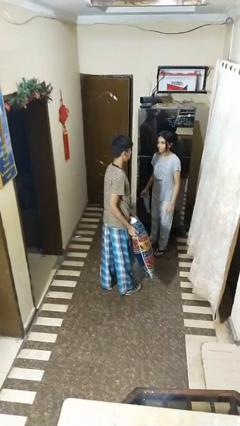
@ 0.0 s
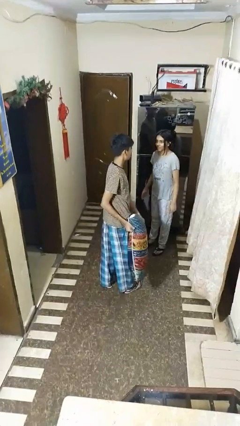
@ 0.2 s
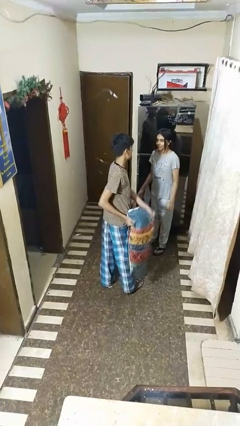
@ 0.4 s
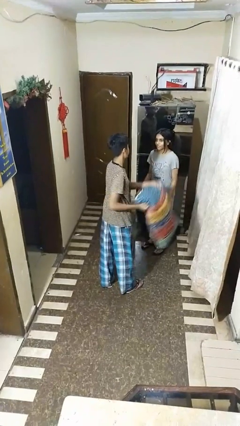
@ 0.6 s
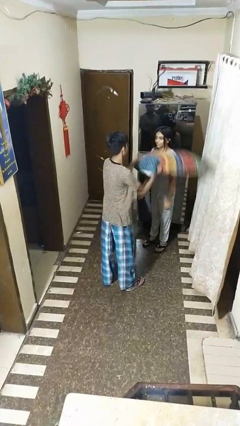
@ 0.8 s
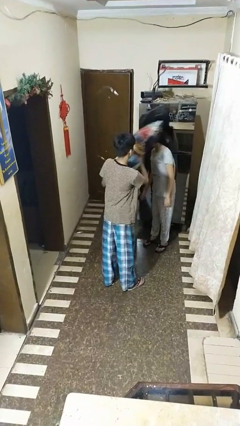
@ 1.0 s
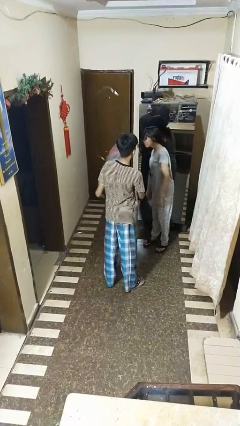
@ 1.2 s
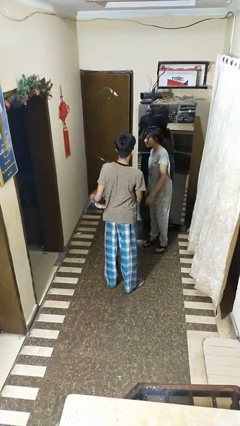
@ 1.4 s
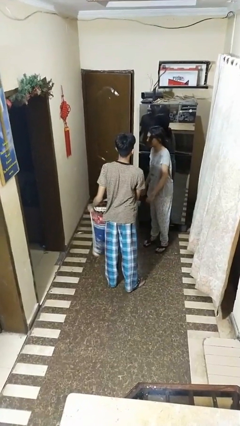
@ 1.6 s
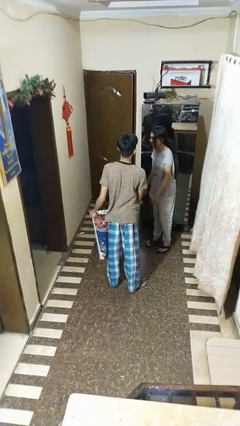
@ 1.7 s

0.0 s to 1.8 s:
person hits person with pillow

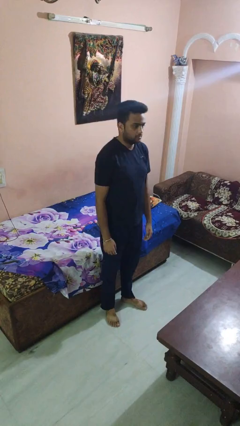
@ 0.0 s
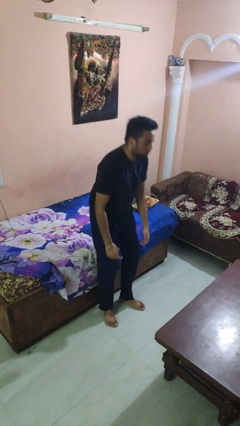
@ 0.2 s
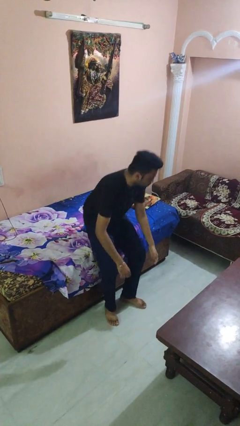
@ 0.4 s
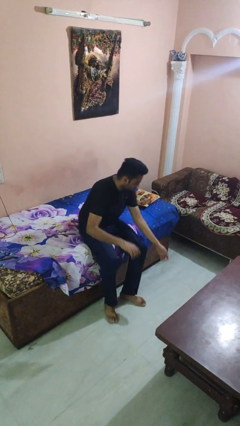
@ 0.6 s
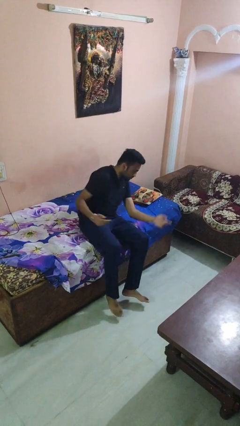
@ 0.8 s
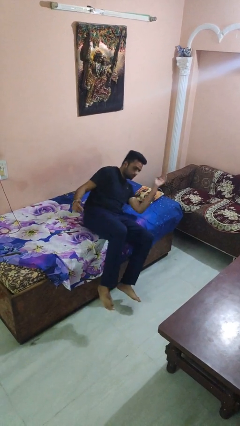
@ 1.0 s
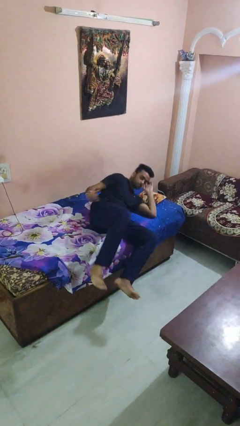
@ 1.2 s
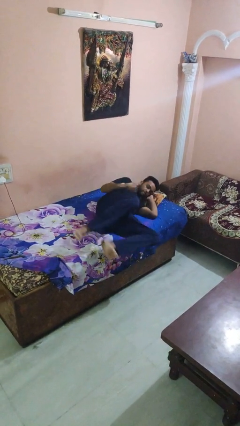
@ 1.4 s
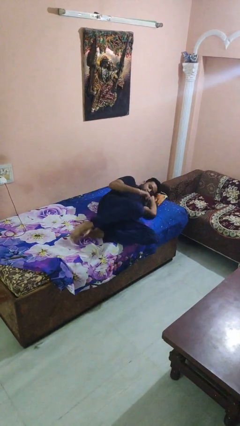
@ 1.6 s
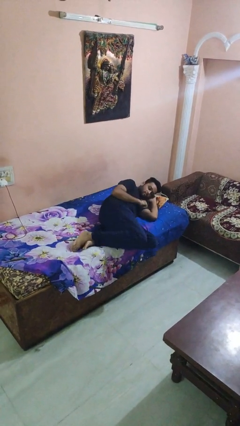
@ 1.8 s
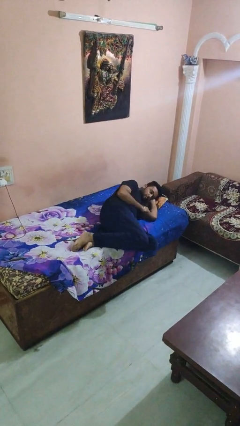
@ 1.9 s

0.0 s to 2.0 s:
person lies down on bed

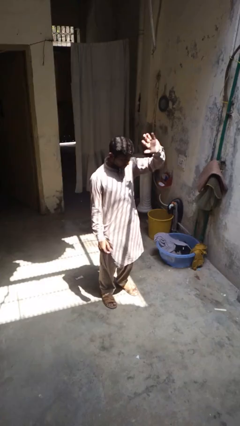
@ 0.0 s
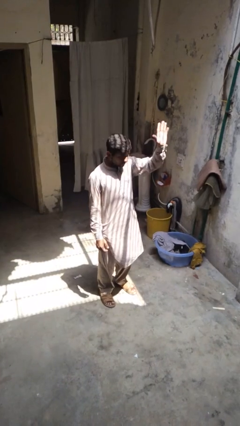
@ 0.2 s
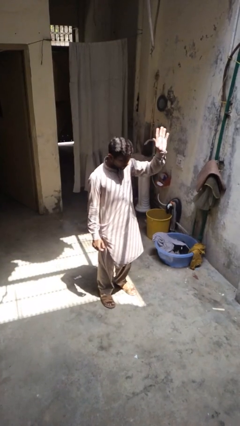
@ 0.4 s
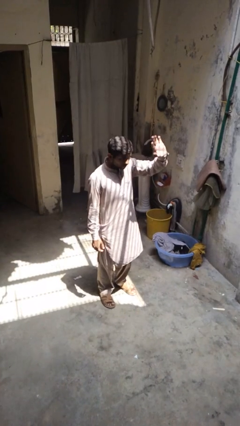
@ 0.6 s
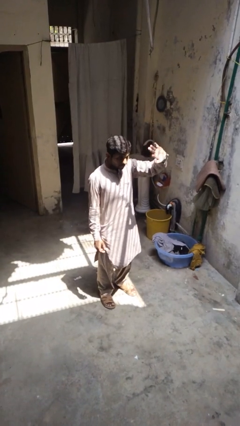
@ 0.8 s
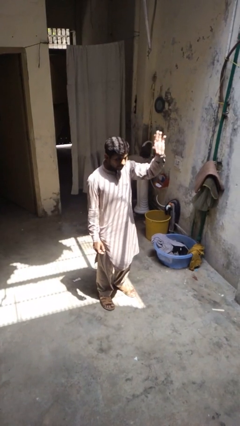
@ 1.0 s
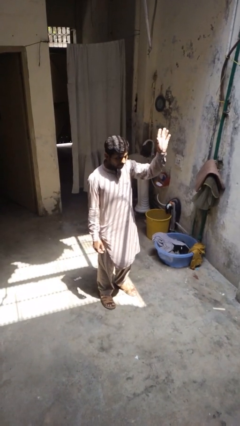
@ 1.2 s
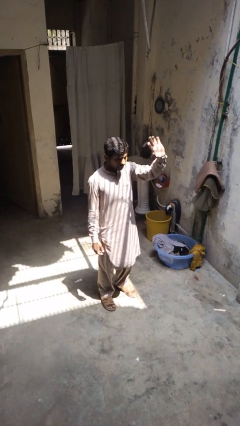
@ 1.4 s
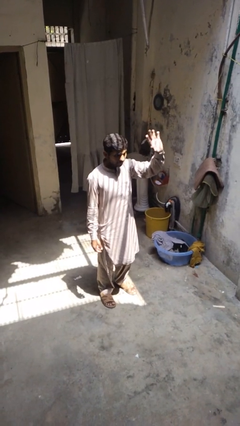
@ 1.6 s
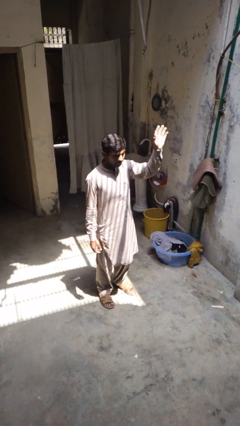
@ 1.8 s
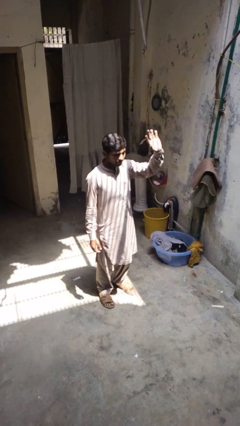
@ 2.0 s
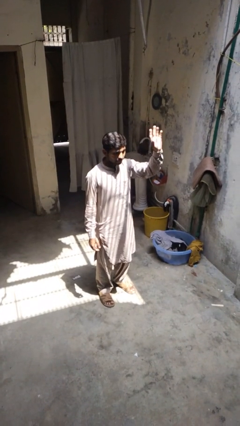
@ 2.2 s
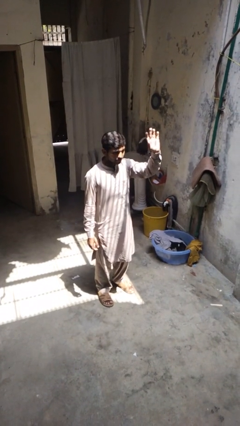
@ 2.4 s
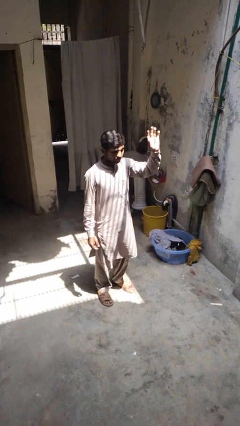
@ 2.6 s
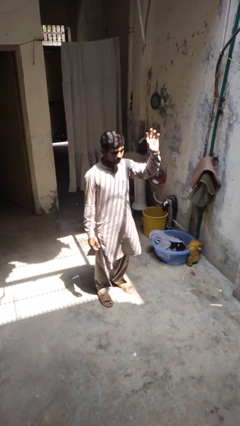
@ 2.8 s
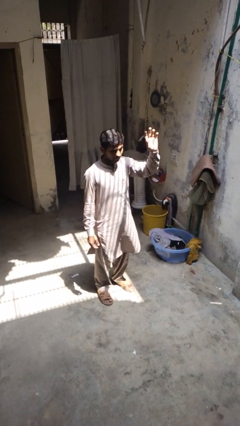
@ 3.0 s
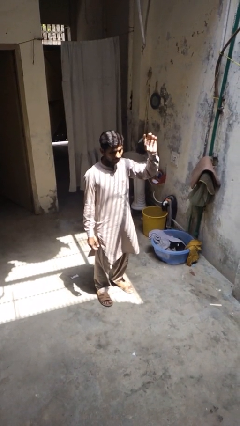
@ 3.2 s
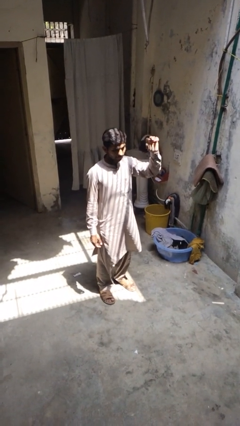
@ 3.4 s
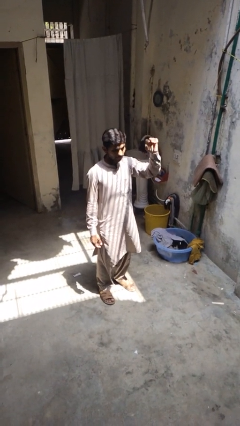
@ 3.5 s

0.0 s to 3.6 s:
person waves at person

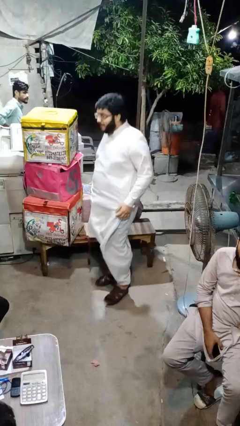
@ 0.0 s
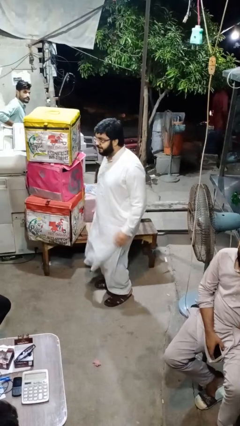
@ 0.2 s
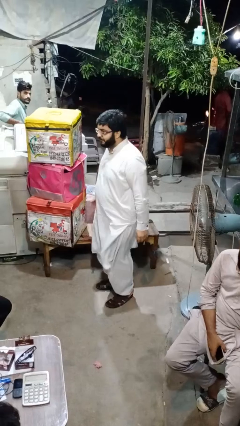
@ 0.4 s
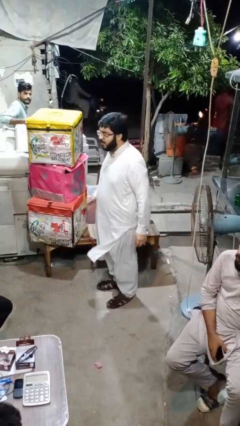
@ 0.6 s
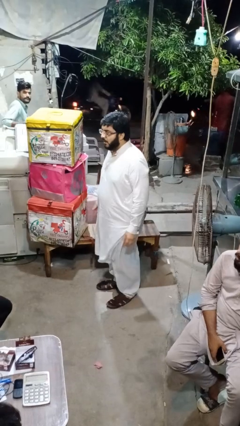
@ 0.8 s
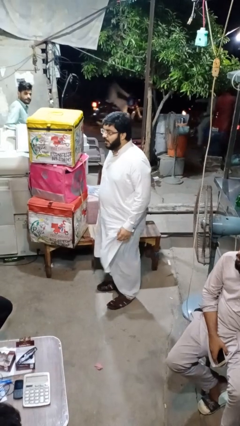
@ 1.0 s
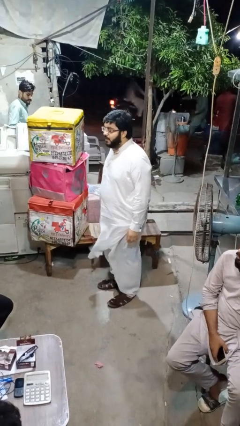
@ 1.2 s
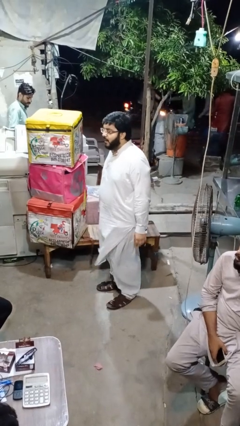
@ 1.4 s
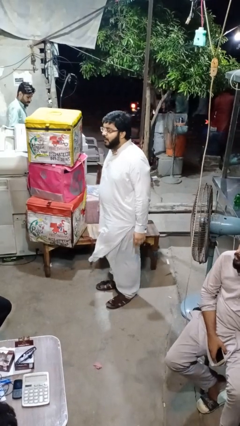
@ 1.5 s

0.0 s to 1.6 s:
person jumps

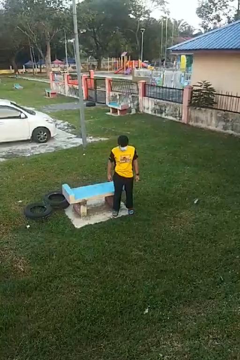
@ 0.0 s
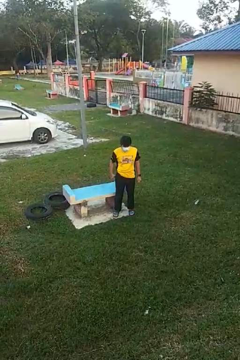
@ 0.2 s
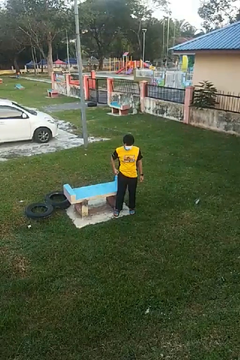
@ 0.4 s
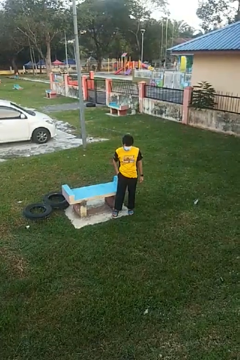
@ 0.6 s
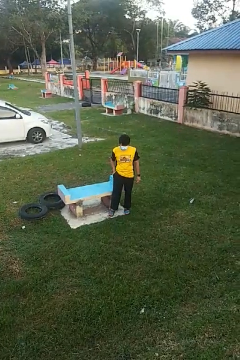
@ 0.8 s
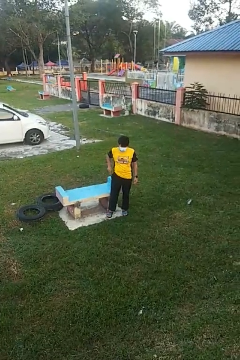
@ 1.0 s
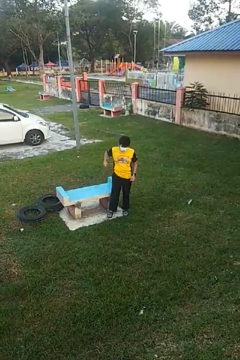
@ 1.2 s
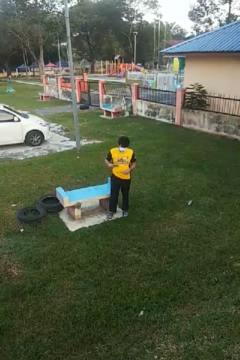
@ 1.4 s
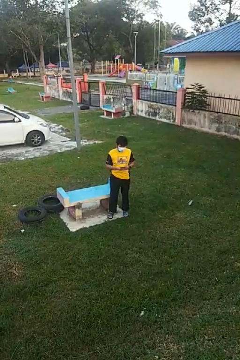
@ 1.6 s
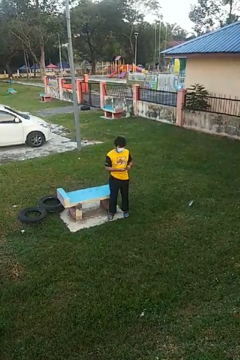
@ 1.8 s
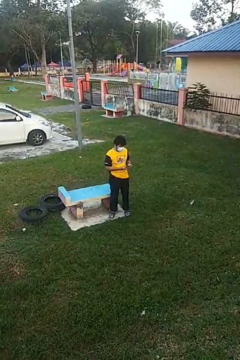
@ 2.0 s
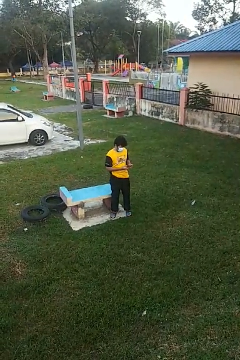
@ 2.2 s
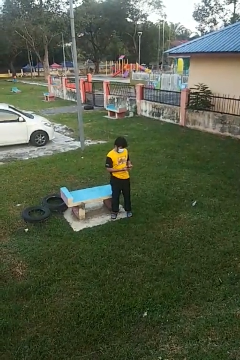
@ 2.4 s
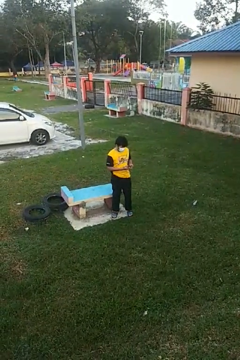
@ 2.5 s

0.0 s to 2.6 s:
person takes phone from pocket

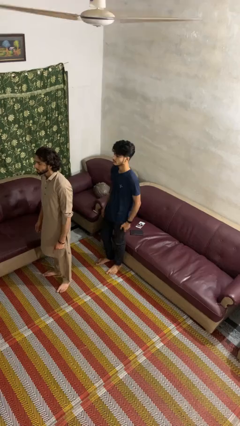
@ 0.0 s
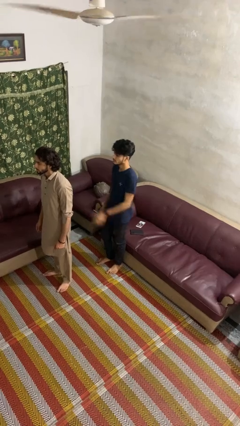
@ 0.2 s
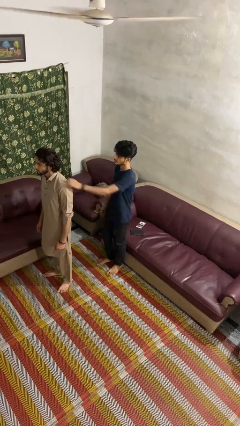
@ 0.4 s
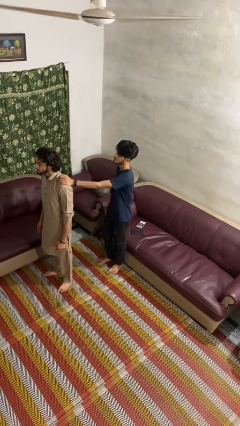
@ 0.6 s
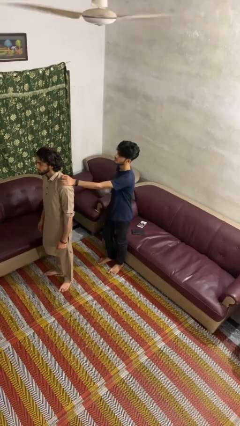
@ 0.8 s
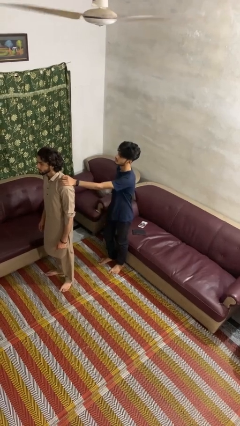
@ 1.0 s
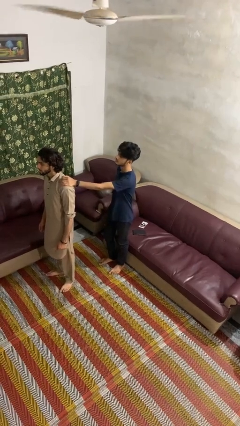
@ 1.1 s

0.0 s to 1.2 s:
person grabs person by shoulder

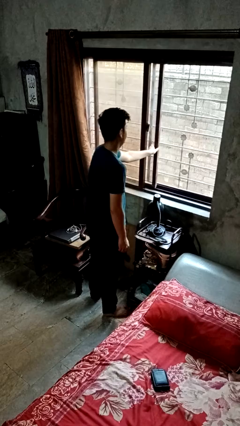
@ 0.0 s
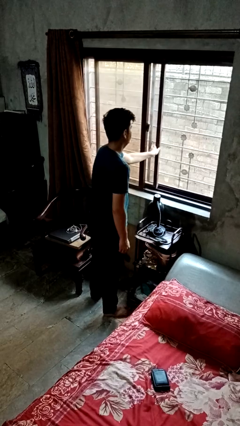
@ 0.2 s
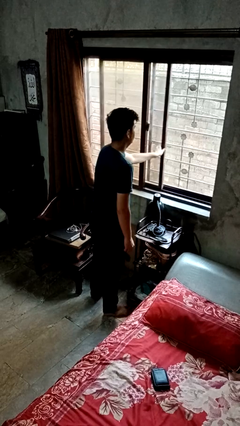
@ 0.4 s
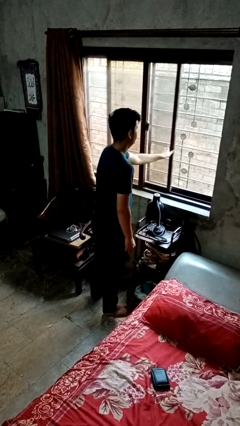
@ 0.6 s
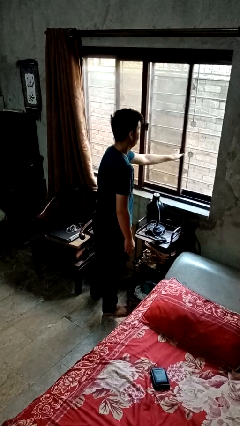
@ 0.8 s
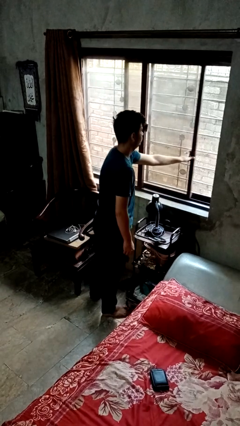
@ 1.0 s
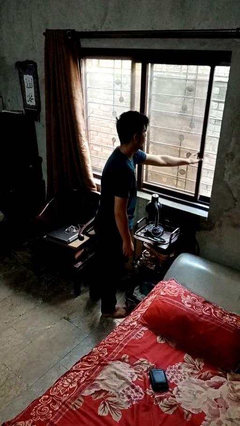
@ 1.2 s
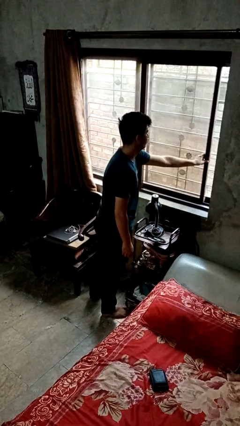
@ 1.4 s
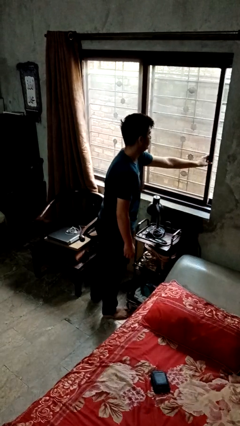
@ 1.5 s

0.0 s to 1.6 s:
person closes home window

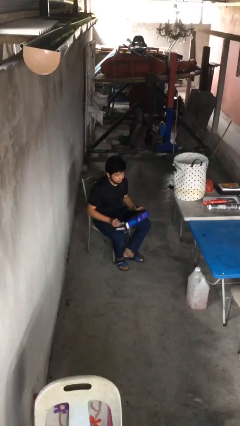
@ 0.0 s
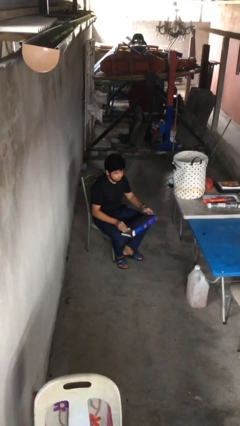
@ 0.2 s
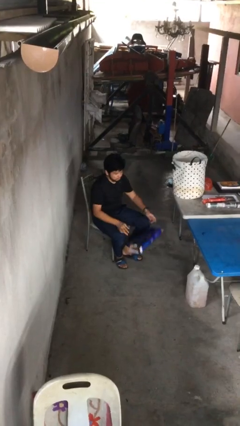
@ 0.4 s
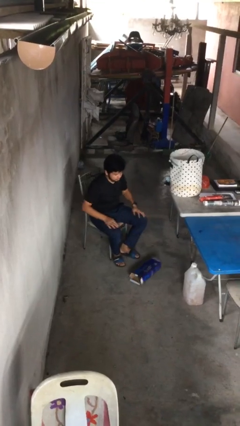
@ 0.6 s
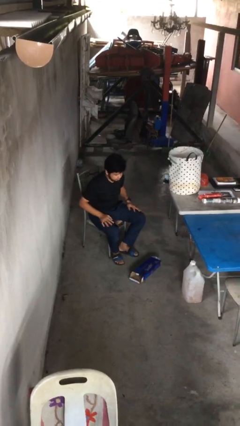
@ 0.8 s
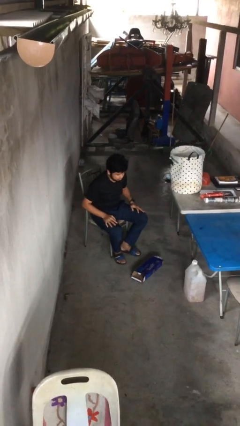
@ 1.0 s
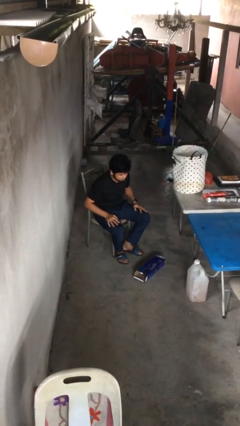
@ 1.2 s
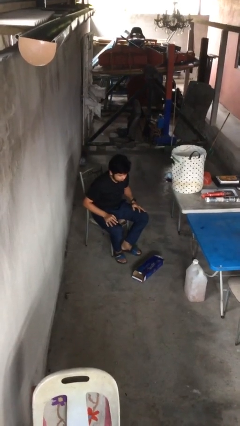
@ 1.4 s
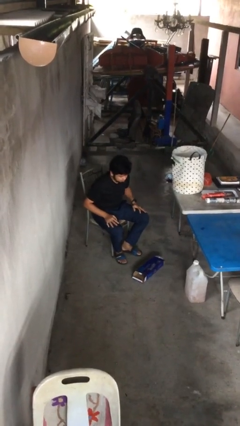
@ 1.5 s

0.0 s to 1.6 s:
person drops object

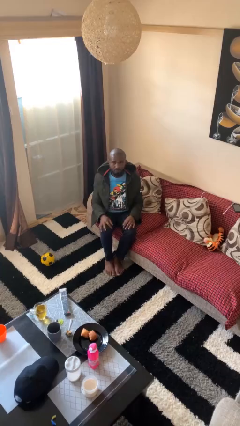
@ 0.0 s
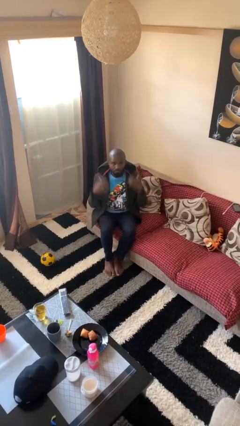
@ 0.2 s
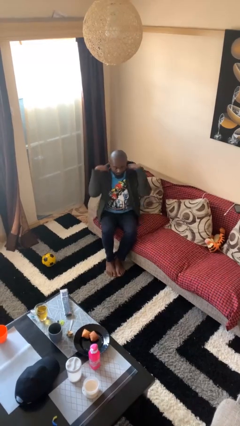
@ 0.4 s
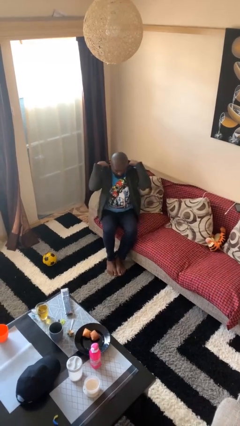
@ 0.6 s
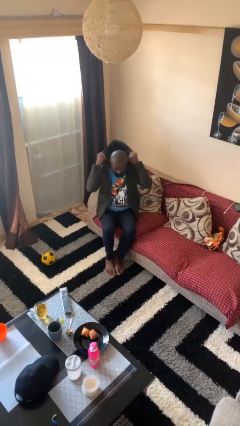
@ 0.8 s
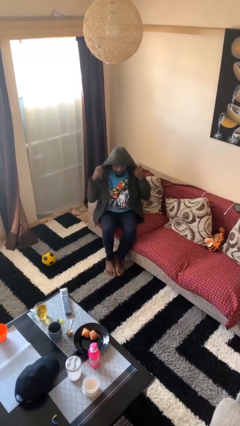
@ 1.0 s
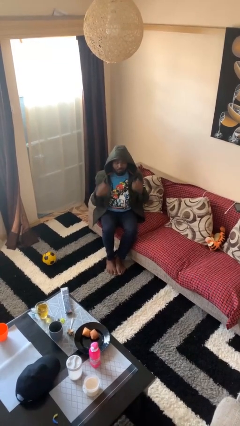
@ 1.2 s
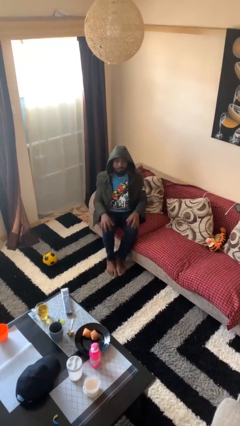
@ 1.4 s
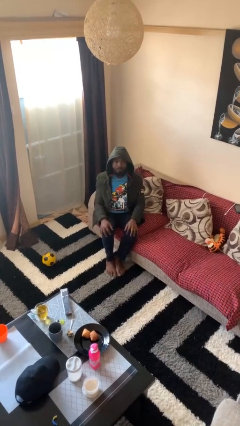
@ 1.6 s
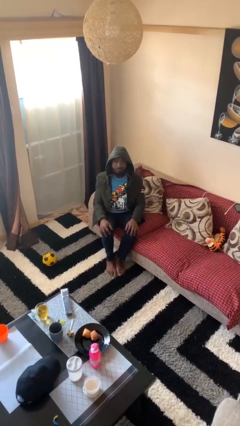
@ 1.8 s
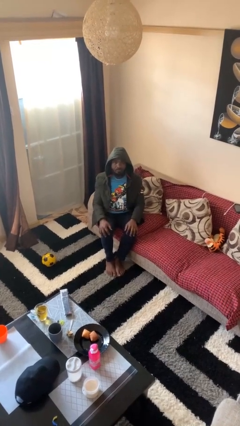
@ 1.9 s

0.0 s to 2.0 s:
person puts on hoodie
